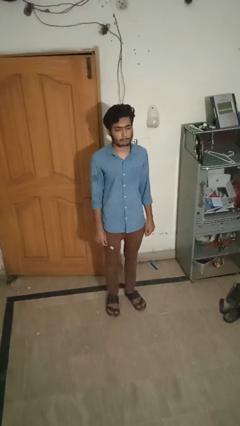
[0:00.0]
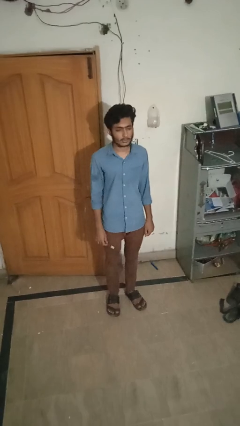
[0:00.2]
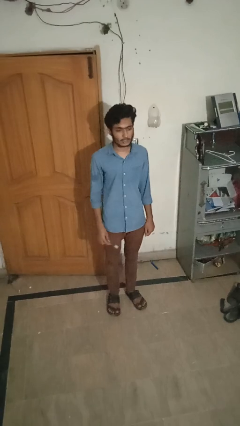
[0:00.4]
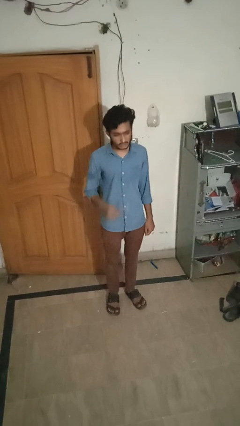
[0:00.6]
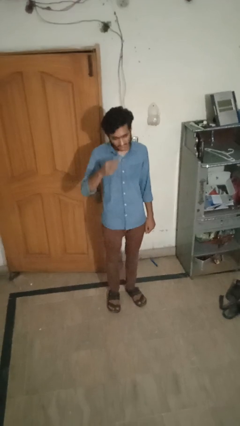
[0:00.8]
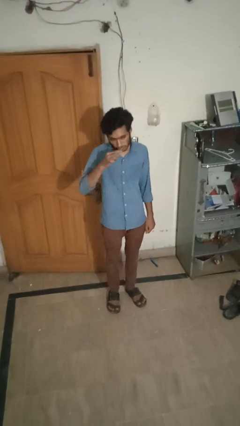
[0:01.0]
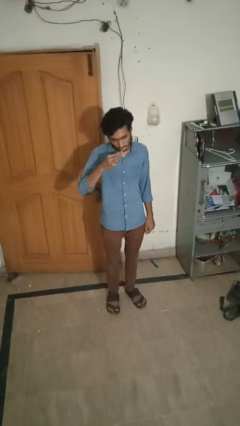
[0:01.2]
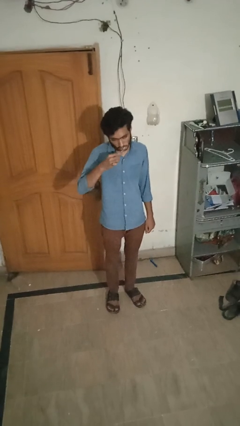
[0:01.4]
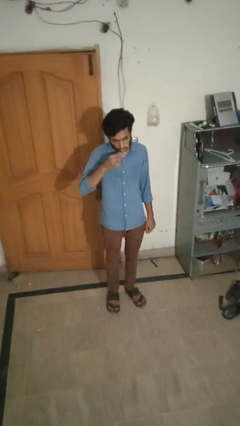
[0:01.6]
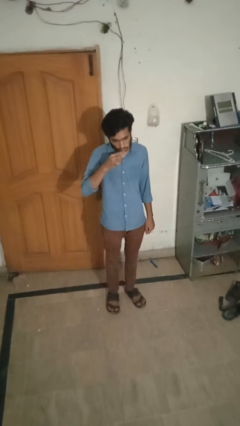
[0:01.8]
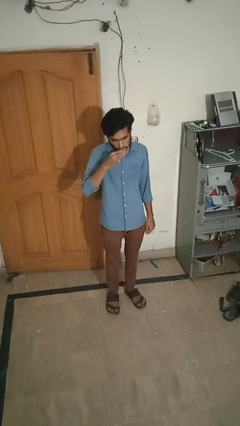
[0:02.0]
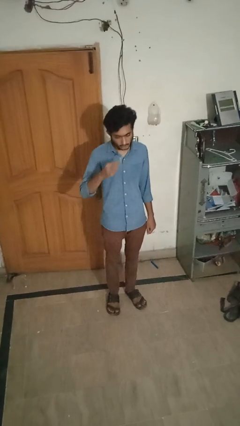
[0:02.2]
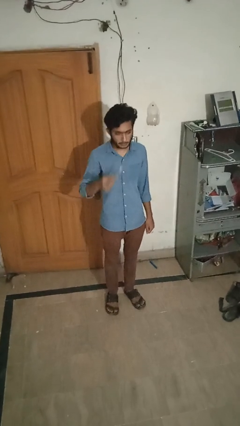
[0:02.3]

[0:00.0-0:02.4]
person brushes teeth

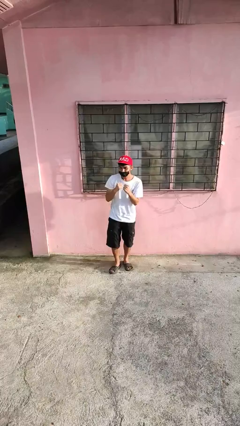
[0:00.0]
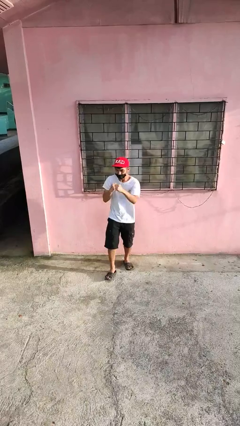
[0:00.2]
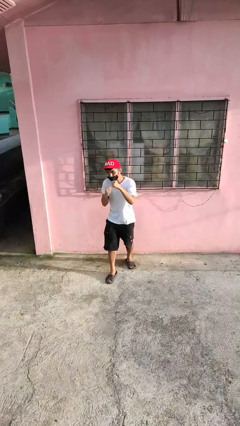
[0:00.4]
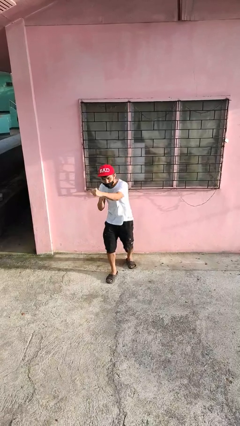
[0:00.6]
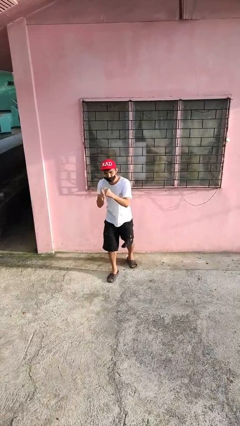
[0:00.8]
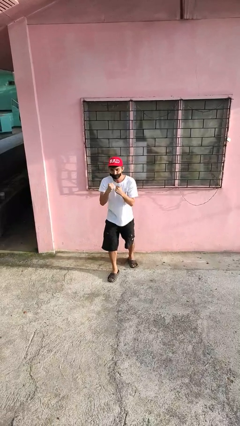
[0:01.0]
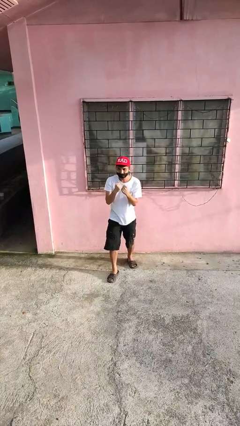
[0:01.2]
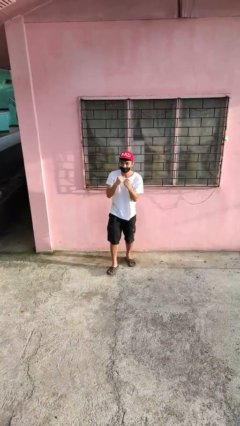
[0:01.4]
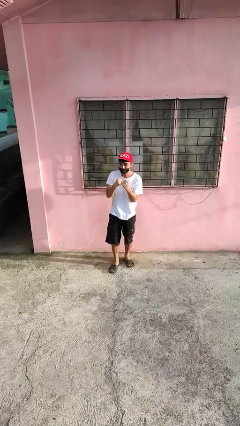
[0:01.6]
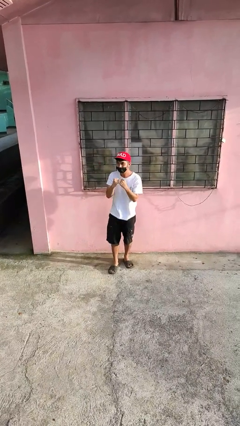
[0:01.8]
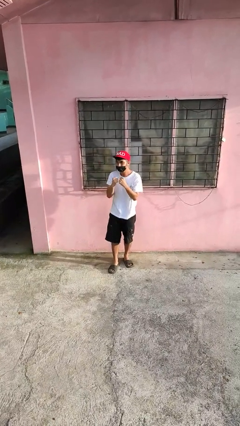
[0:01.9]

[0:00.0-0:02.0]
person punches

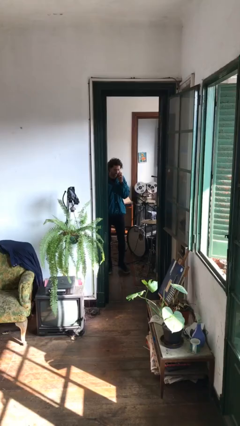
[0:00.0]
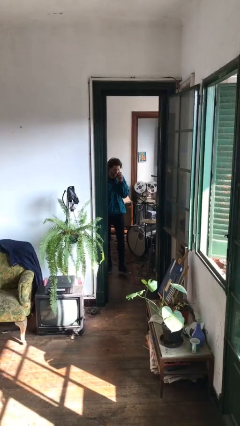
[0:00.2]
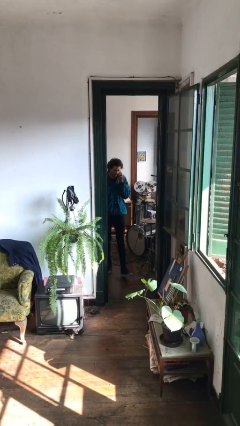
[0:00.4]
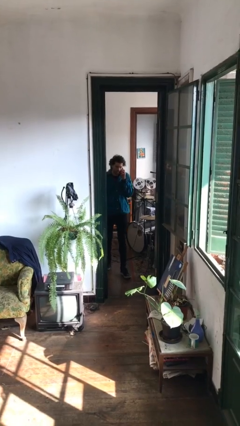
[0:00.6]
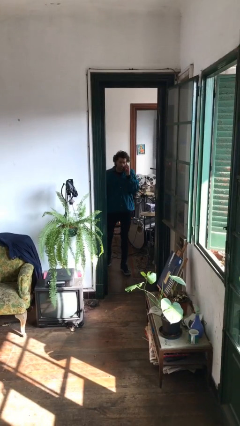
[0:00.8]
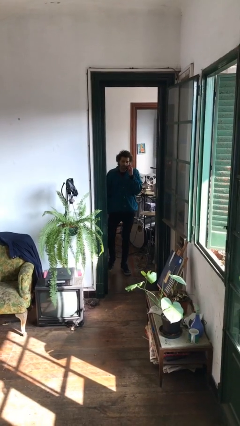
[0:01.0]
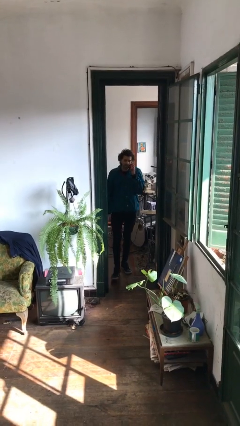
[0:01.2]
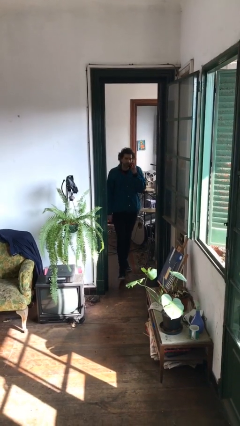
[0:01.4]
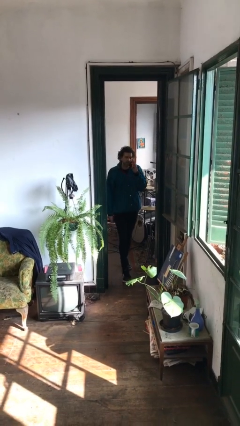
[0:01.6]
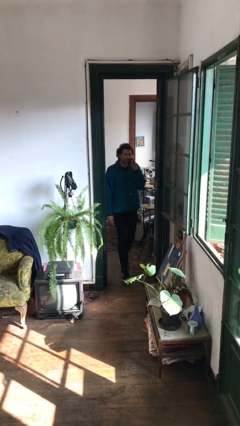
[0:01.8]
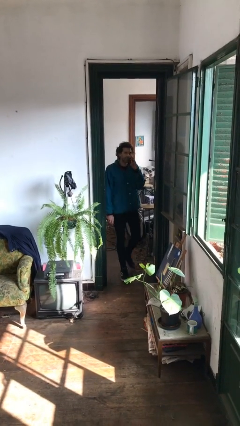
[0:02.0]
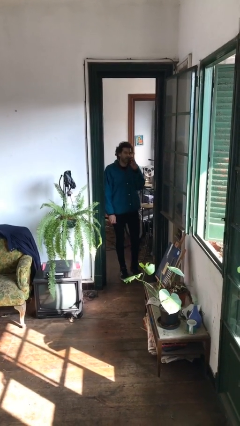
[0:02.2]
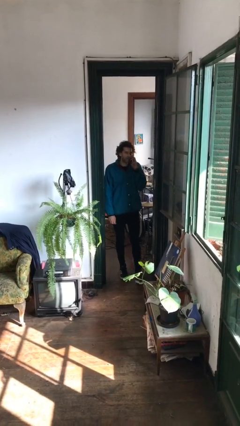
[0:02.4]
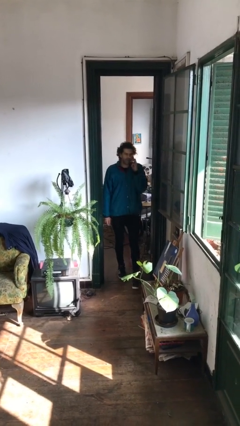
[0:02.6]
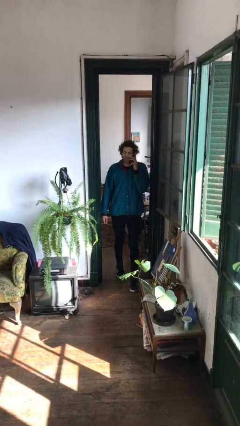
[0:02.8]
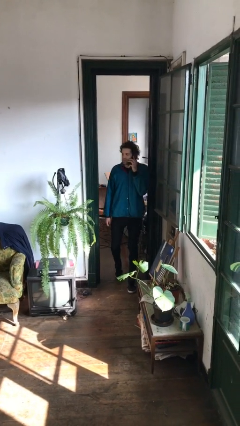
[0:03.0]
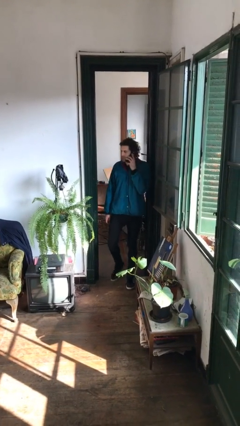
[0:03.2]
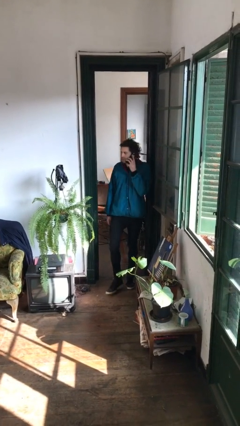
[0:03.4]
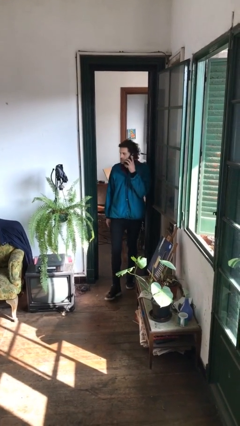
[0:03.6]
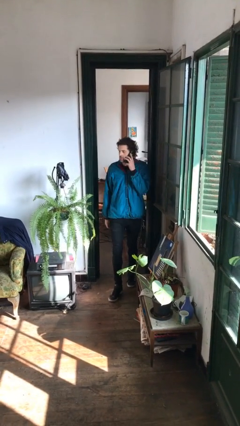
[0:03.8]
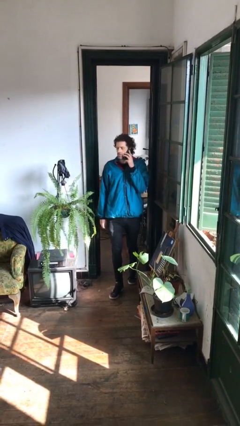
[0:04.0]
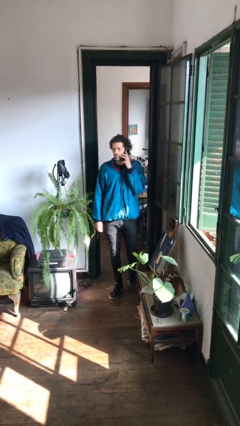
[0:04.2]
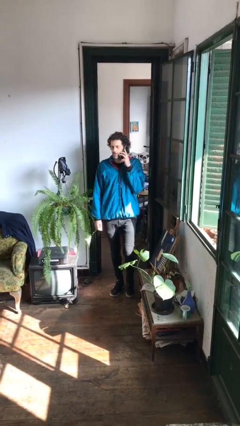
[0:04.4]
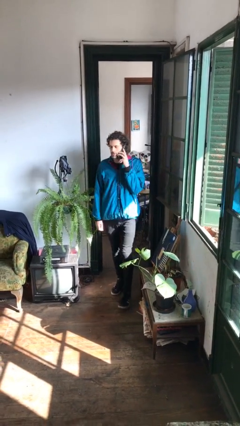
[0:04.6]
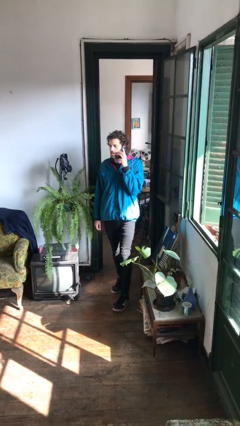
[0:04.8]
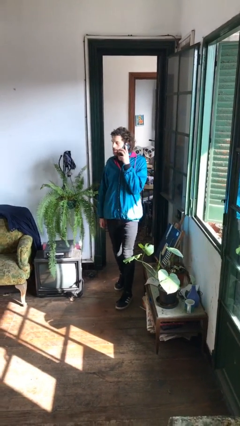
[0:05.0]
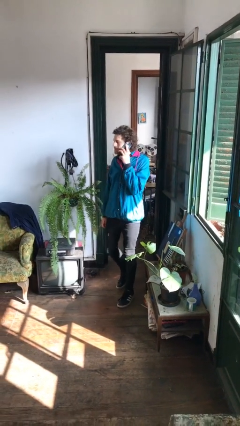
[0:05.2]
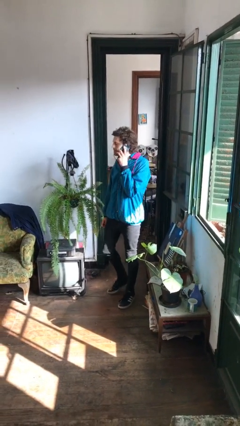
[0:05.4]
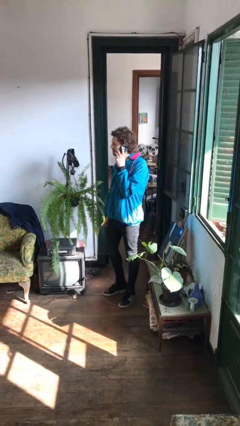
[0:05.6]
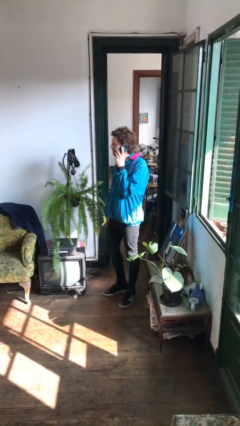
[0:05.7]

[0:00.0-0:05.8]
person enters scene through structure

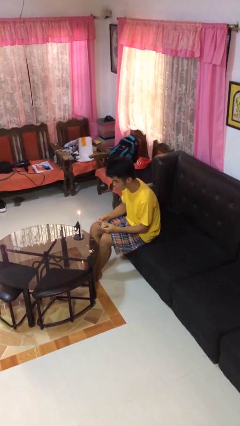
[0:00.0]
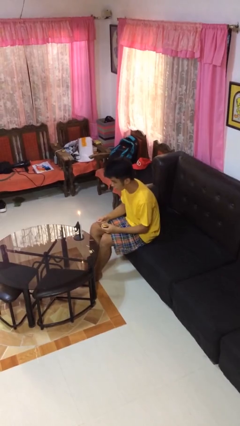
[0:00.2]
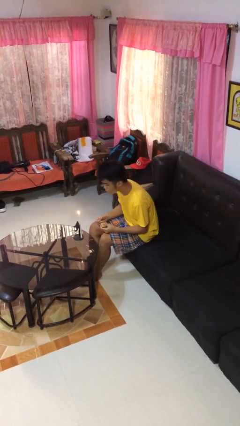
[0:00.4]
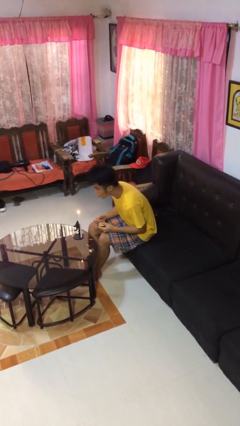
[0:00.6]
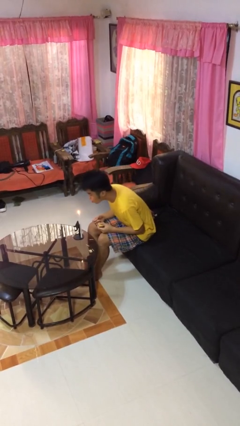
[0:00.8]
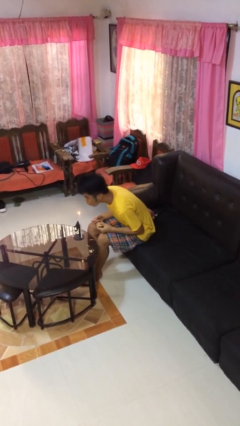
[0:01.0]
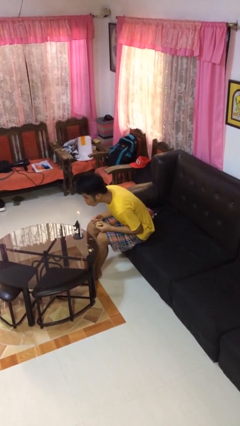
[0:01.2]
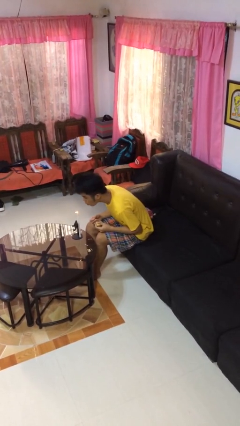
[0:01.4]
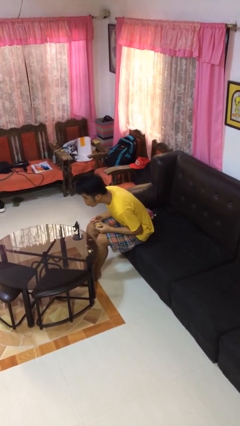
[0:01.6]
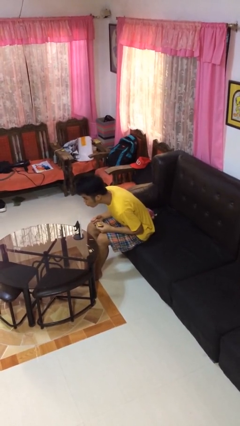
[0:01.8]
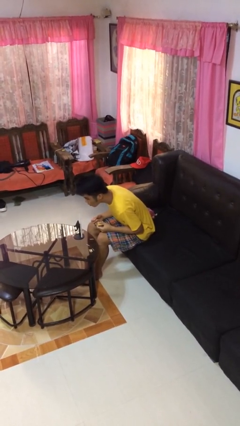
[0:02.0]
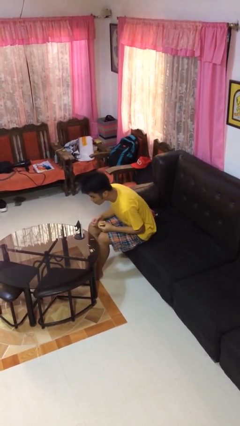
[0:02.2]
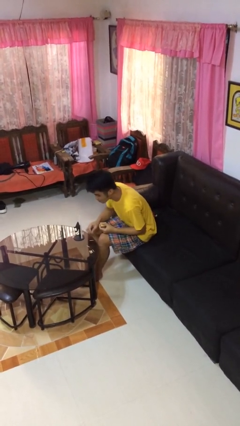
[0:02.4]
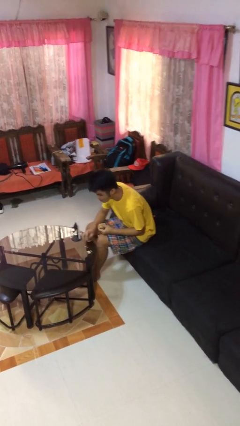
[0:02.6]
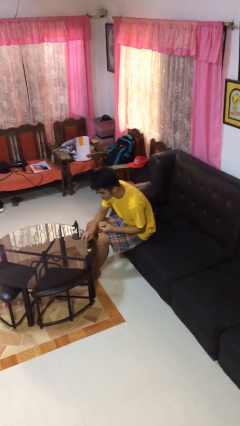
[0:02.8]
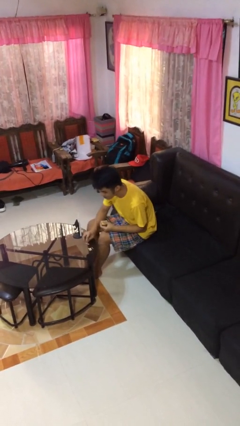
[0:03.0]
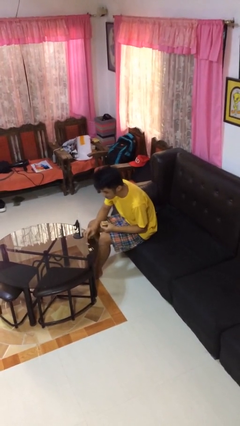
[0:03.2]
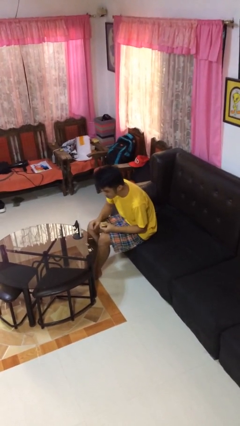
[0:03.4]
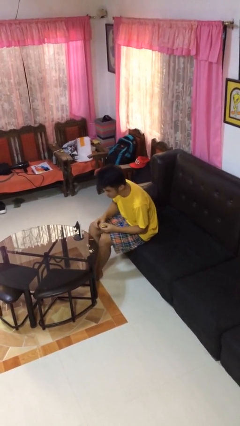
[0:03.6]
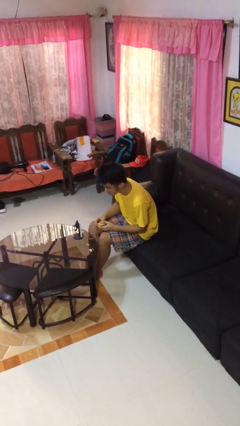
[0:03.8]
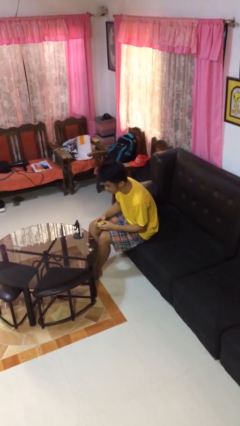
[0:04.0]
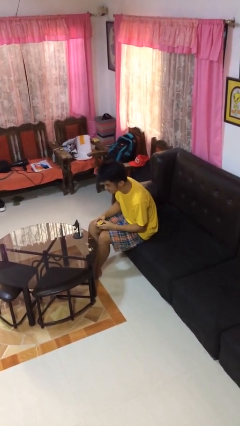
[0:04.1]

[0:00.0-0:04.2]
person extinguishes candle

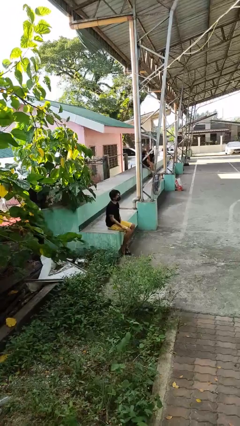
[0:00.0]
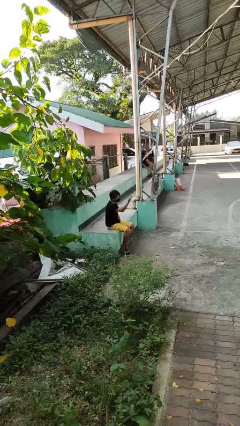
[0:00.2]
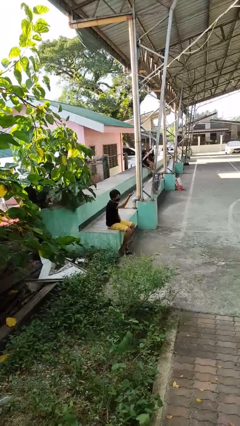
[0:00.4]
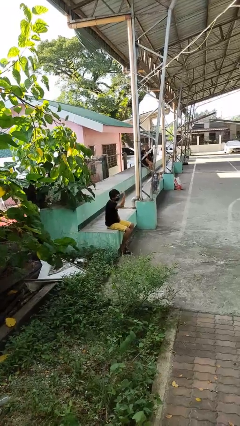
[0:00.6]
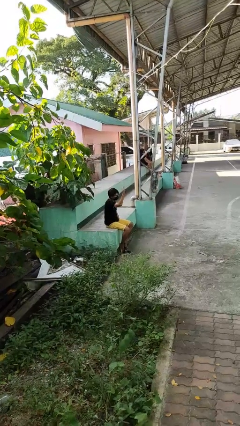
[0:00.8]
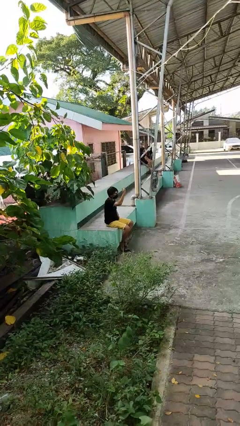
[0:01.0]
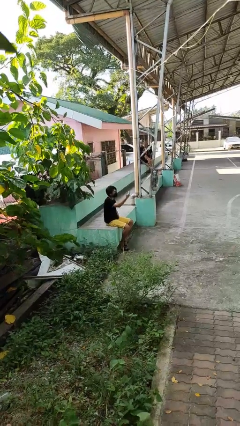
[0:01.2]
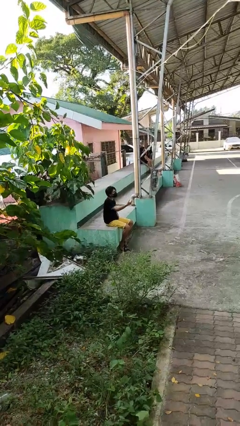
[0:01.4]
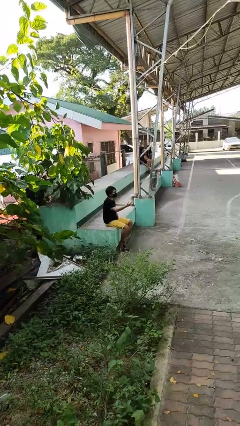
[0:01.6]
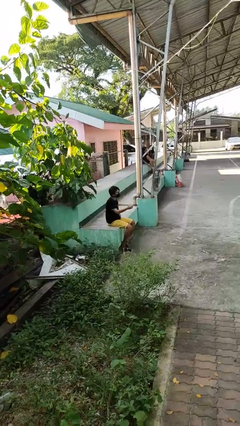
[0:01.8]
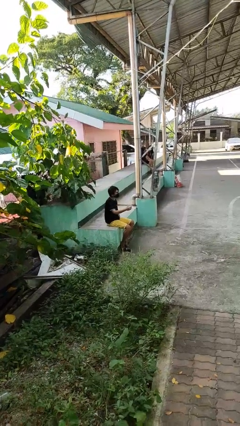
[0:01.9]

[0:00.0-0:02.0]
person gestures come here

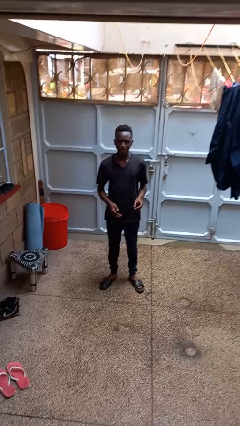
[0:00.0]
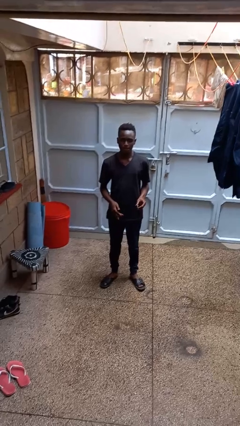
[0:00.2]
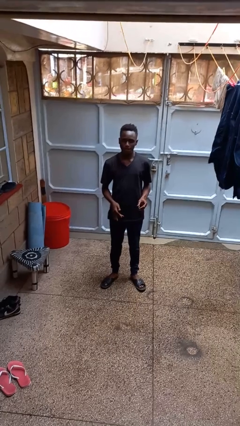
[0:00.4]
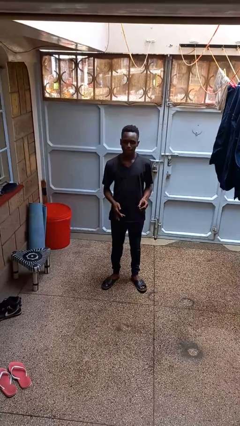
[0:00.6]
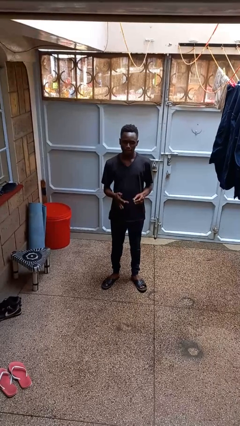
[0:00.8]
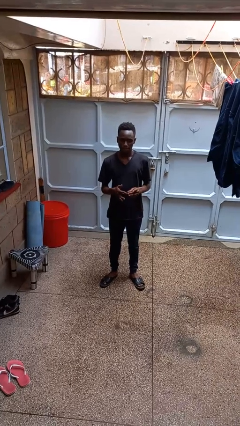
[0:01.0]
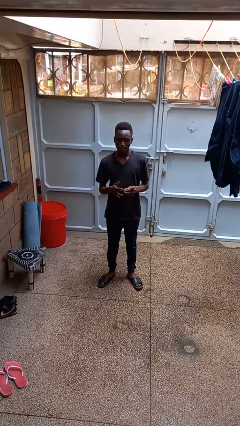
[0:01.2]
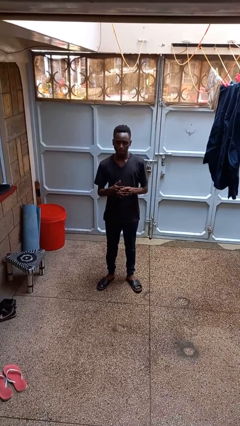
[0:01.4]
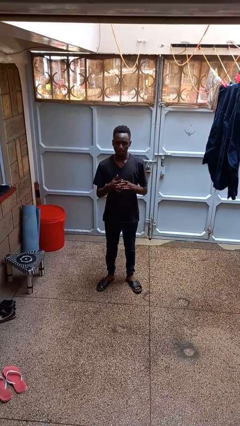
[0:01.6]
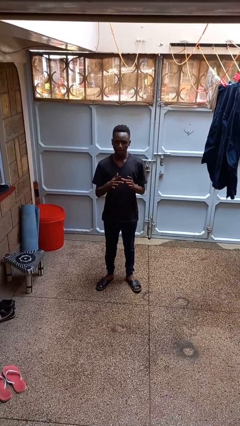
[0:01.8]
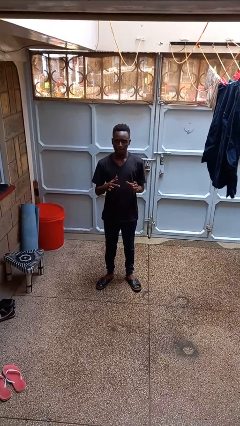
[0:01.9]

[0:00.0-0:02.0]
person puts on ring
